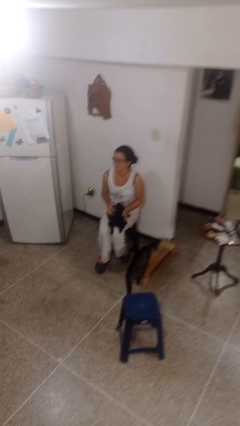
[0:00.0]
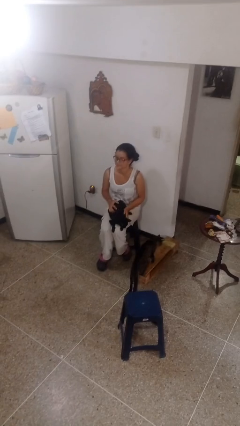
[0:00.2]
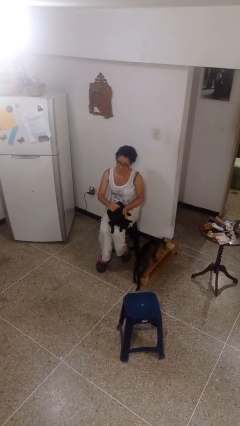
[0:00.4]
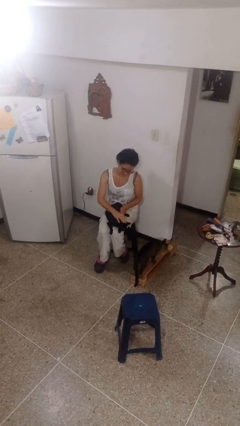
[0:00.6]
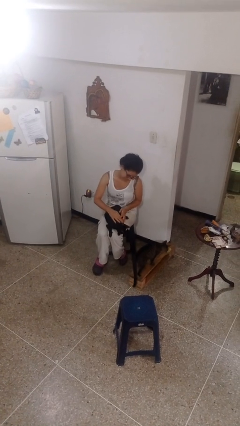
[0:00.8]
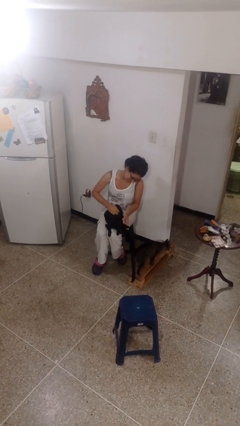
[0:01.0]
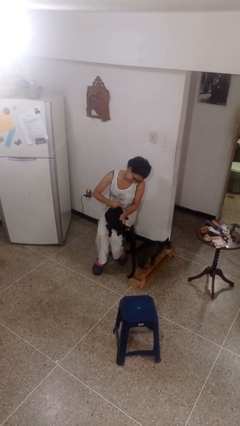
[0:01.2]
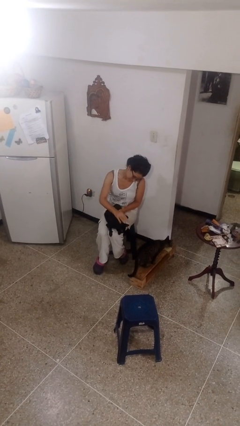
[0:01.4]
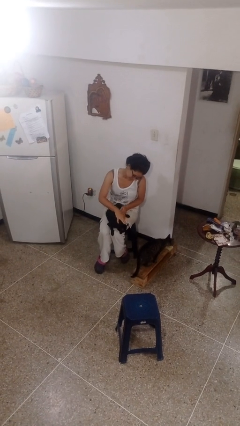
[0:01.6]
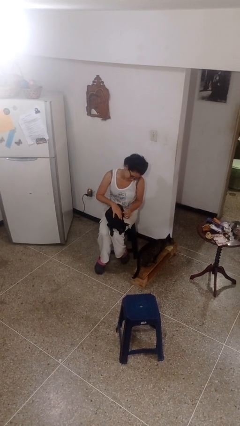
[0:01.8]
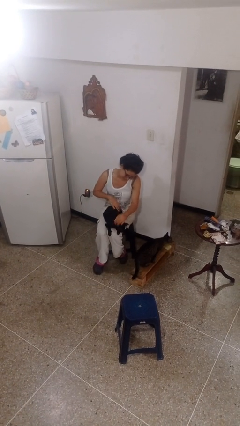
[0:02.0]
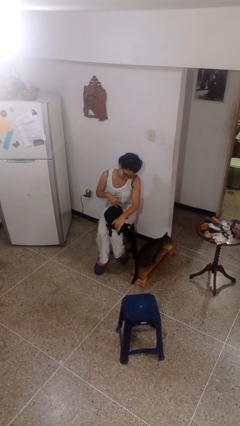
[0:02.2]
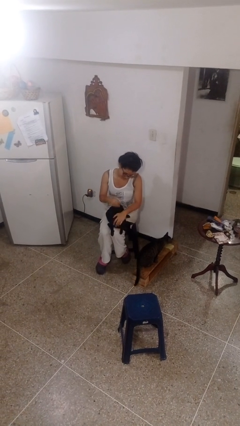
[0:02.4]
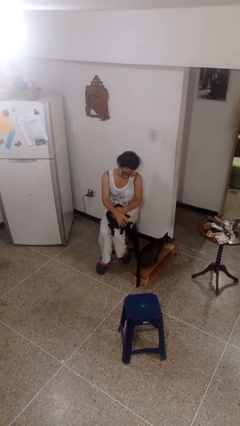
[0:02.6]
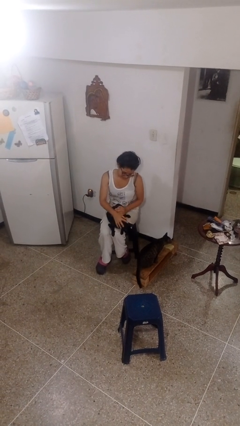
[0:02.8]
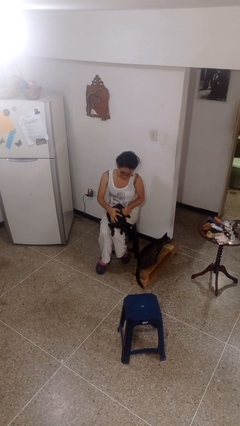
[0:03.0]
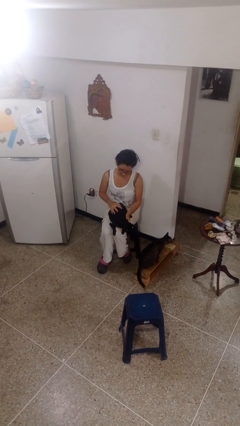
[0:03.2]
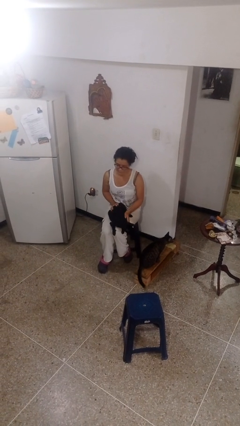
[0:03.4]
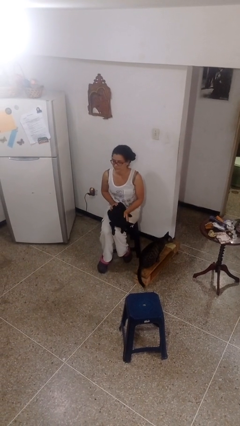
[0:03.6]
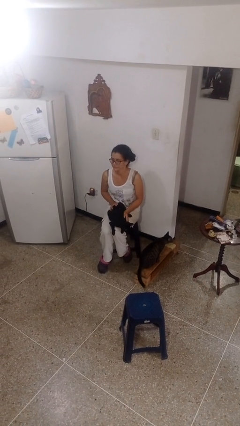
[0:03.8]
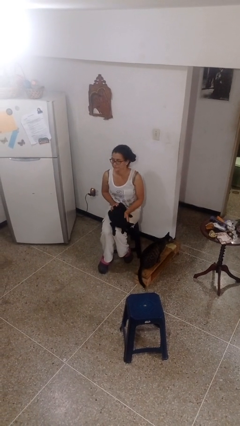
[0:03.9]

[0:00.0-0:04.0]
person pets cat

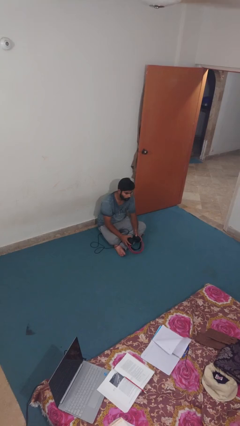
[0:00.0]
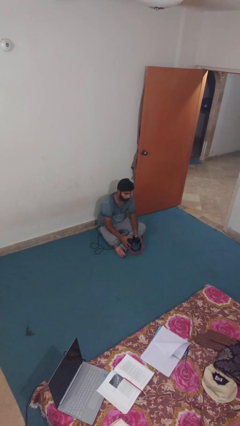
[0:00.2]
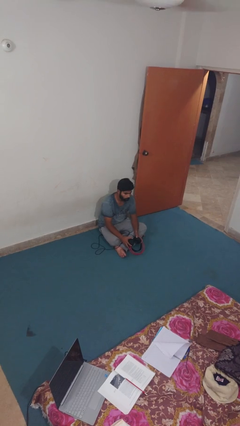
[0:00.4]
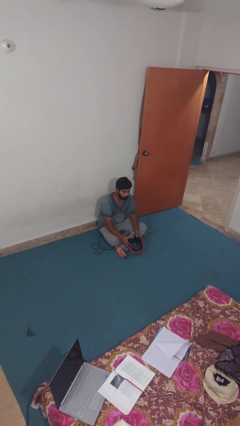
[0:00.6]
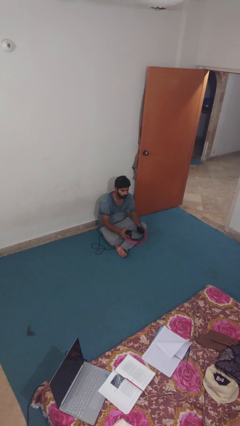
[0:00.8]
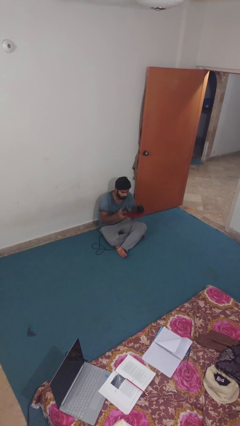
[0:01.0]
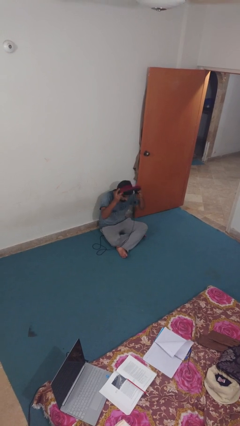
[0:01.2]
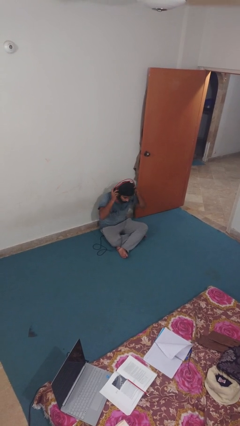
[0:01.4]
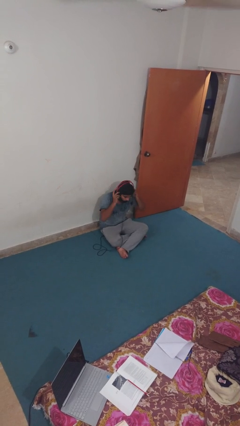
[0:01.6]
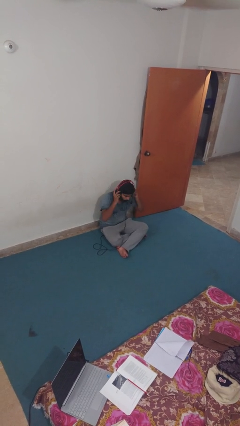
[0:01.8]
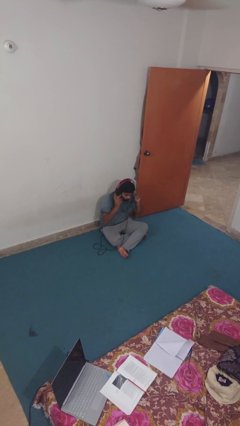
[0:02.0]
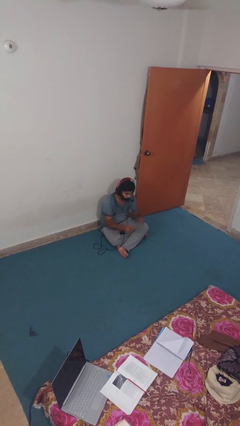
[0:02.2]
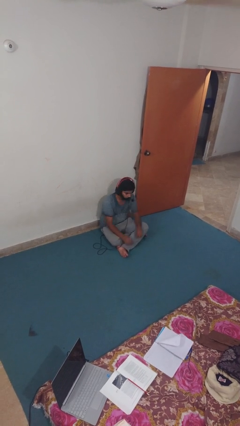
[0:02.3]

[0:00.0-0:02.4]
person puts on headphones

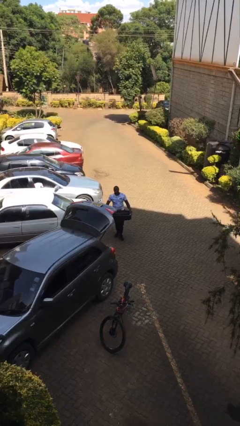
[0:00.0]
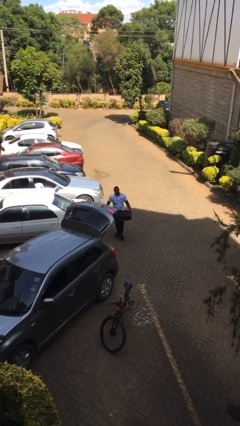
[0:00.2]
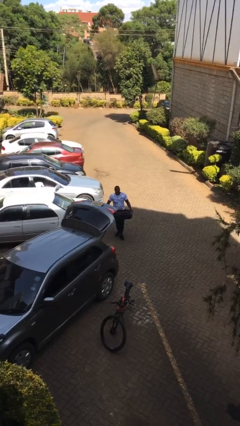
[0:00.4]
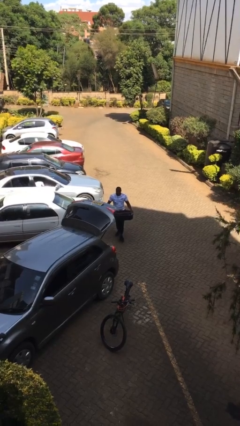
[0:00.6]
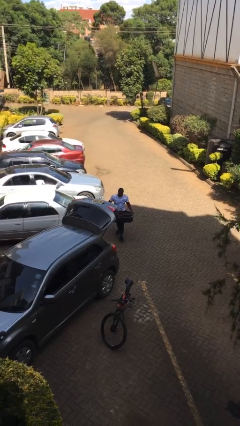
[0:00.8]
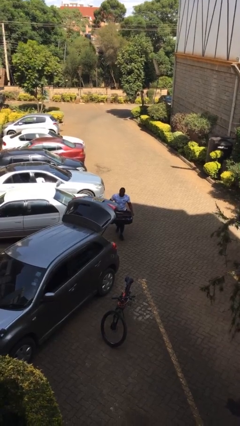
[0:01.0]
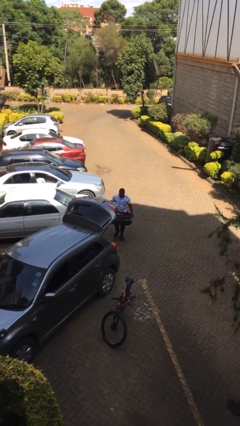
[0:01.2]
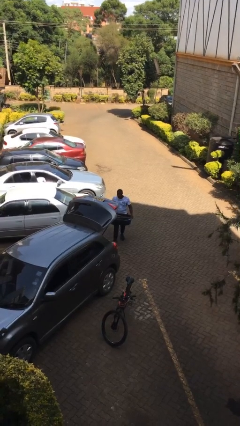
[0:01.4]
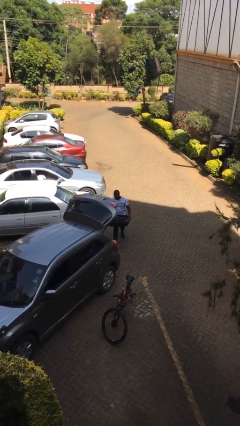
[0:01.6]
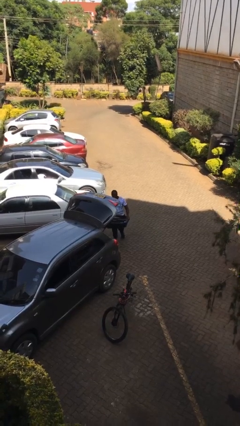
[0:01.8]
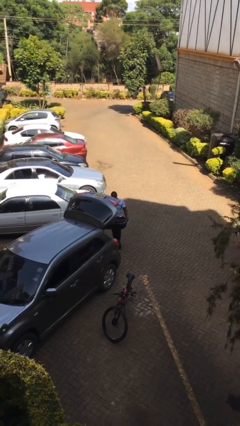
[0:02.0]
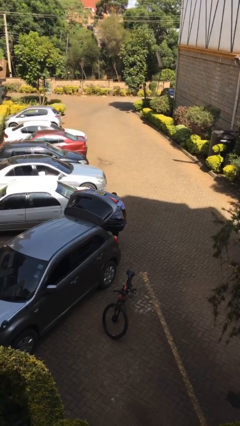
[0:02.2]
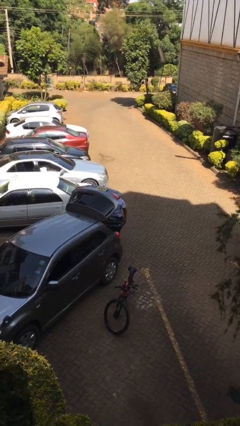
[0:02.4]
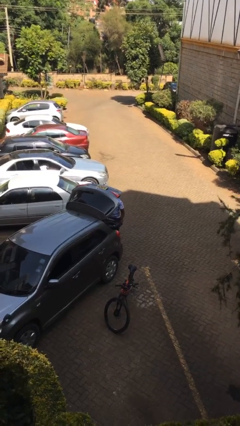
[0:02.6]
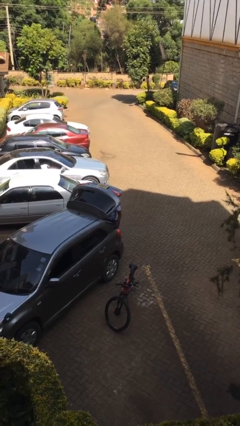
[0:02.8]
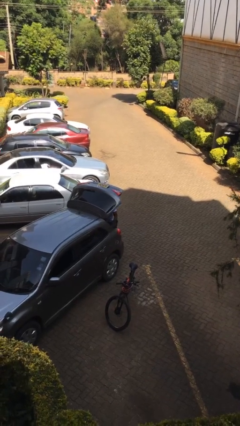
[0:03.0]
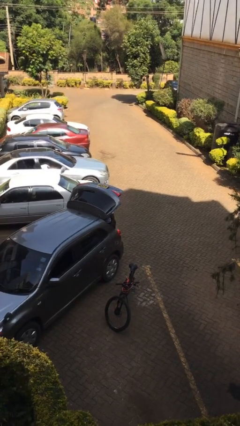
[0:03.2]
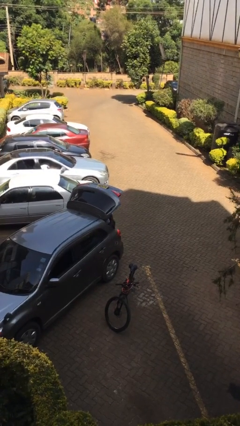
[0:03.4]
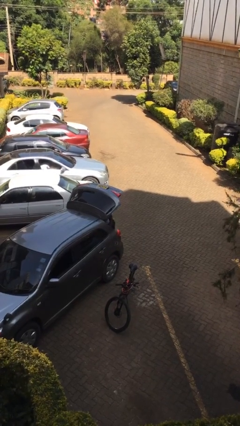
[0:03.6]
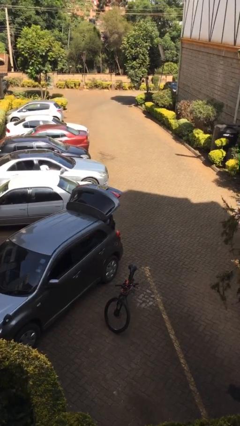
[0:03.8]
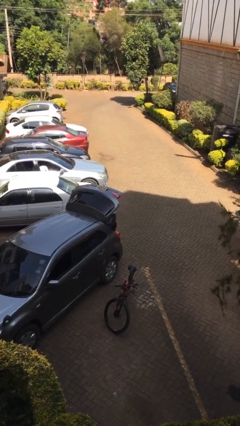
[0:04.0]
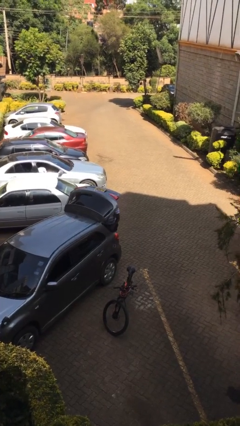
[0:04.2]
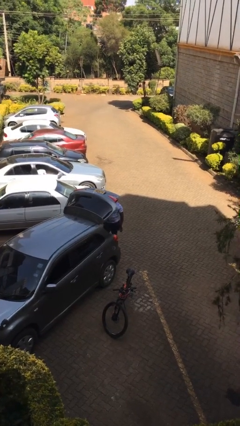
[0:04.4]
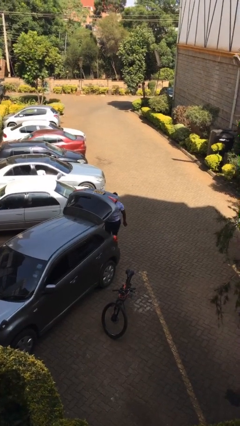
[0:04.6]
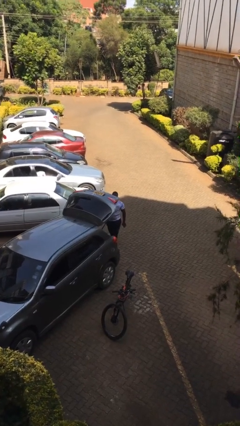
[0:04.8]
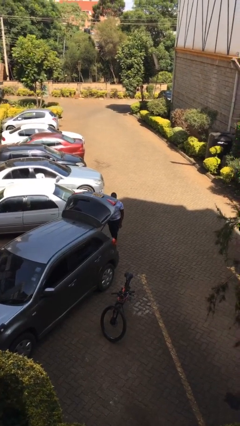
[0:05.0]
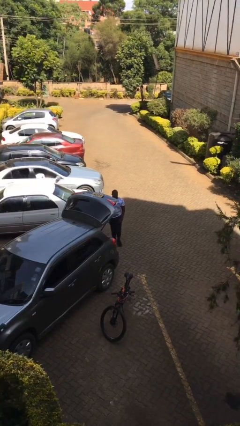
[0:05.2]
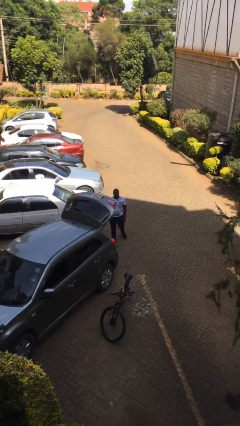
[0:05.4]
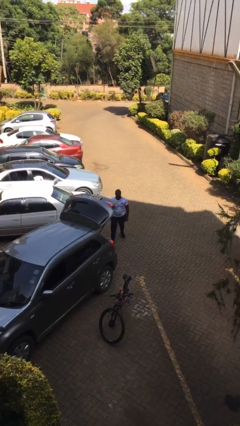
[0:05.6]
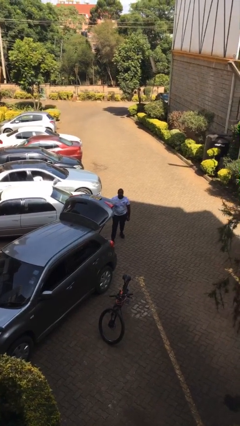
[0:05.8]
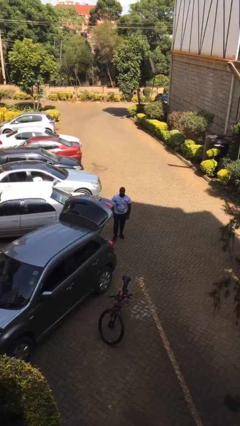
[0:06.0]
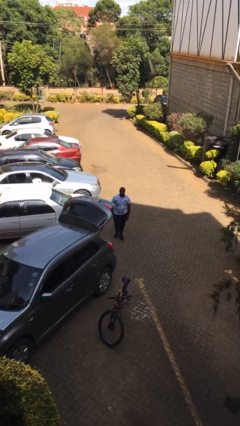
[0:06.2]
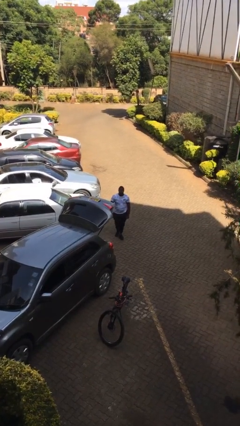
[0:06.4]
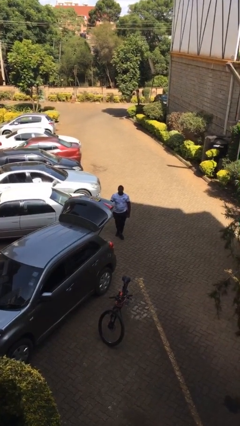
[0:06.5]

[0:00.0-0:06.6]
person loads car

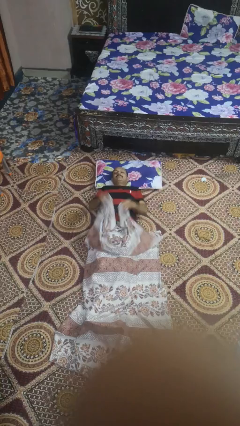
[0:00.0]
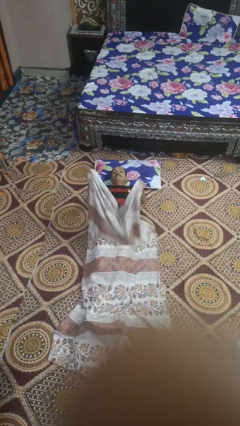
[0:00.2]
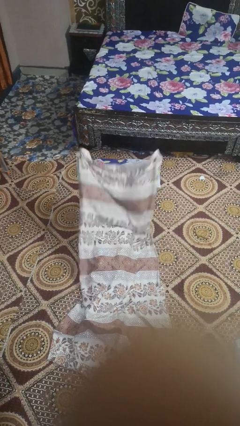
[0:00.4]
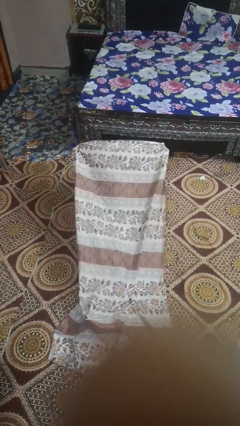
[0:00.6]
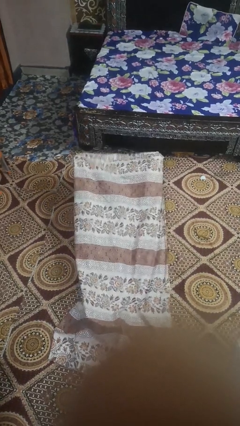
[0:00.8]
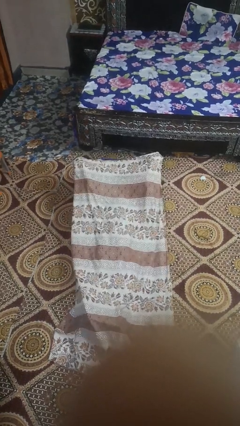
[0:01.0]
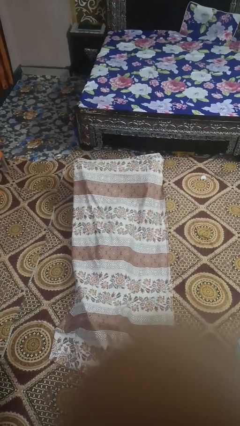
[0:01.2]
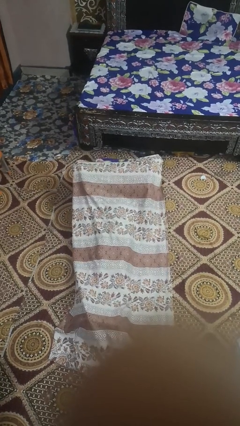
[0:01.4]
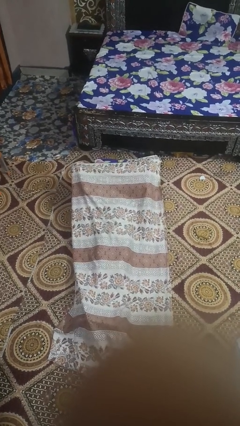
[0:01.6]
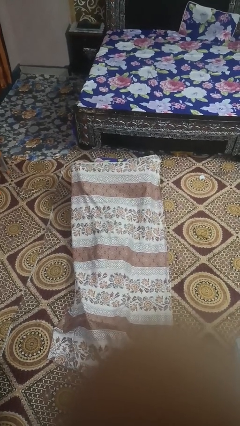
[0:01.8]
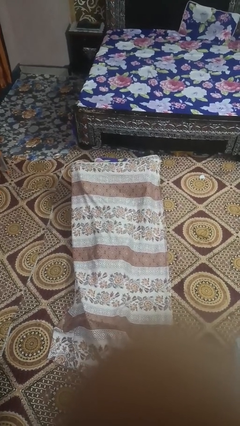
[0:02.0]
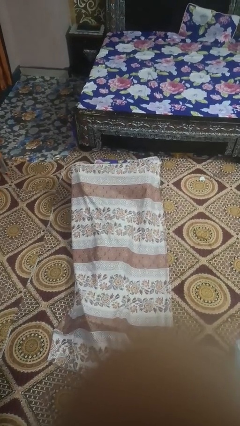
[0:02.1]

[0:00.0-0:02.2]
person covers with bedsheets

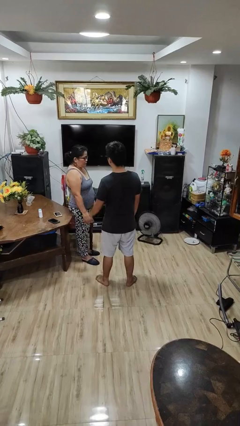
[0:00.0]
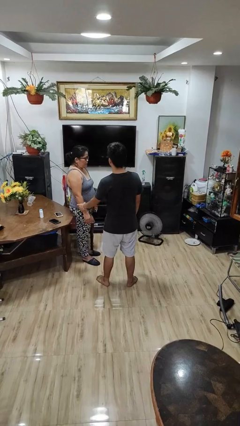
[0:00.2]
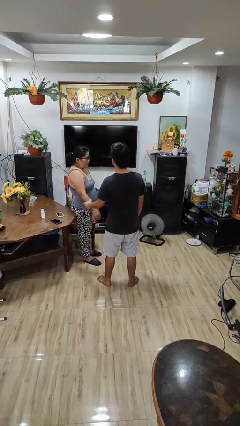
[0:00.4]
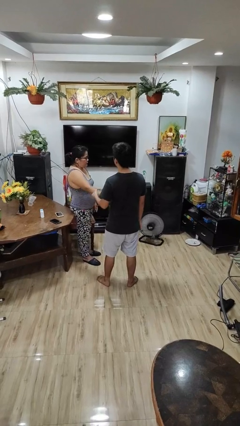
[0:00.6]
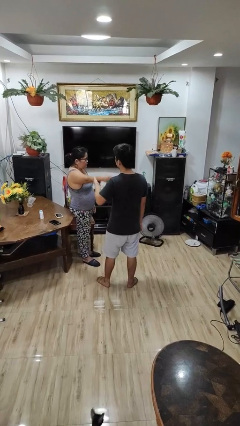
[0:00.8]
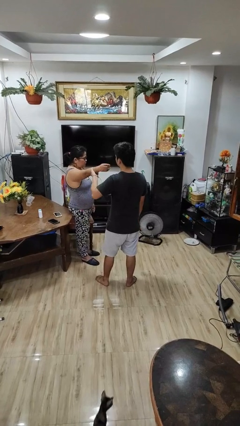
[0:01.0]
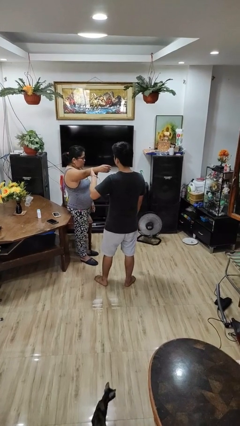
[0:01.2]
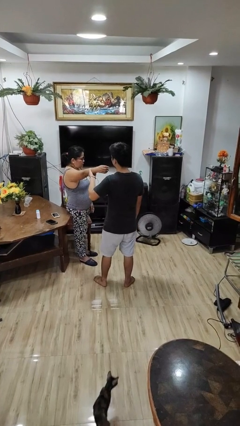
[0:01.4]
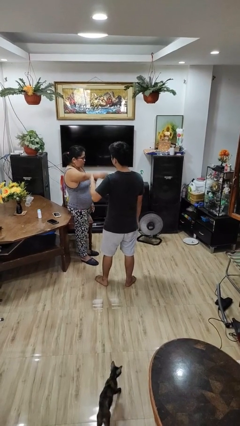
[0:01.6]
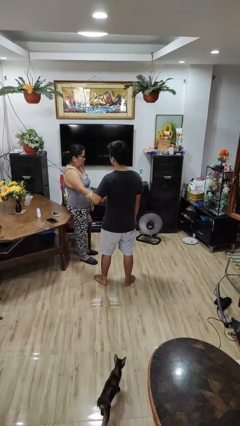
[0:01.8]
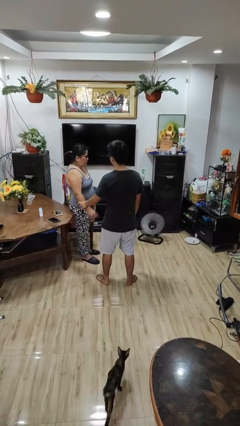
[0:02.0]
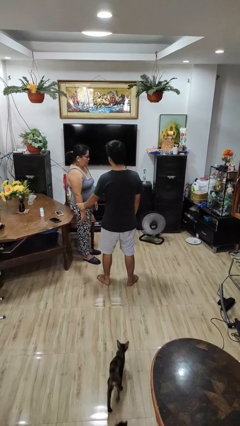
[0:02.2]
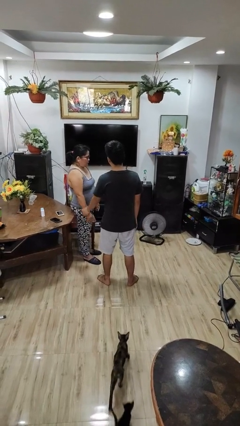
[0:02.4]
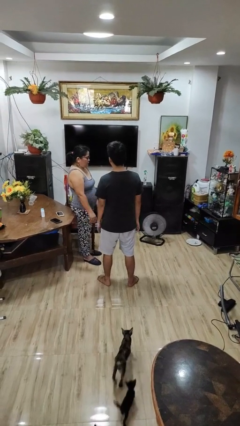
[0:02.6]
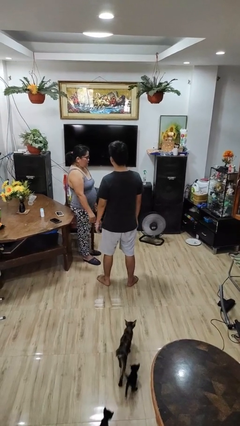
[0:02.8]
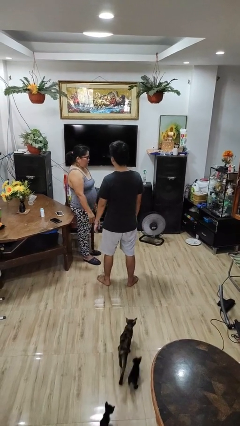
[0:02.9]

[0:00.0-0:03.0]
person grabs person by forearm
